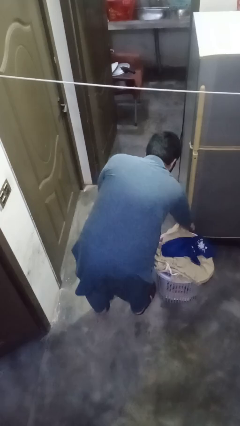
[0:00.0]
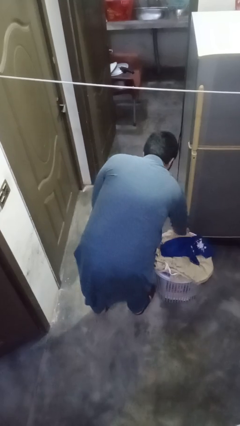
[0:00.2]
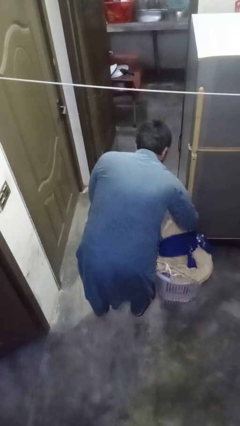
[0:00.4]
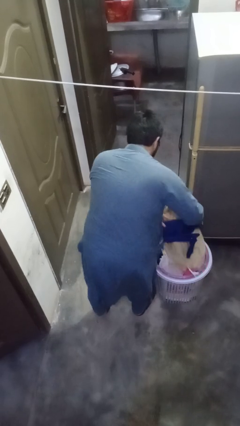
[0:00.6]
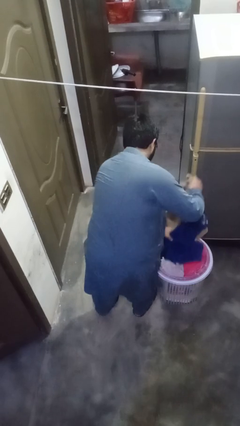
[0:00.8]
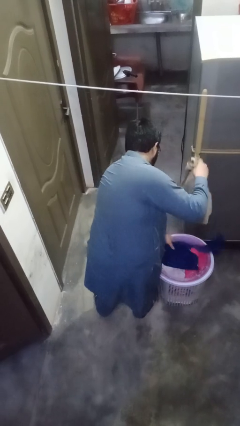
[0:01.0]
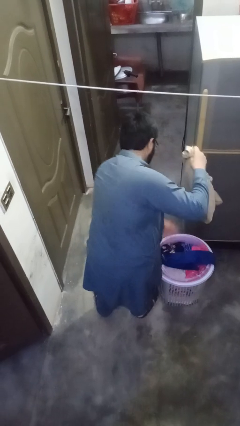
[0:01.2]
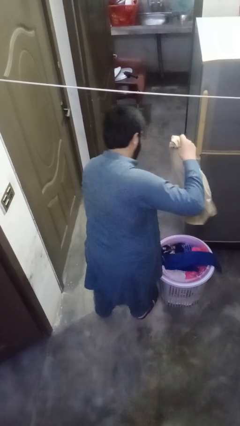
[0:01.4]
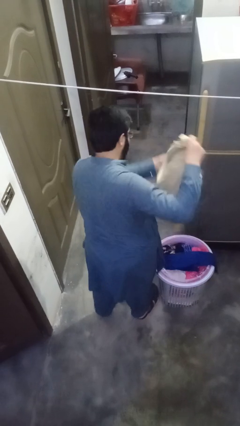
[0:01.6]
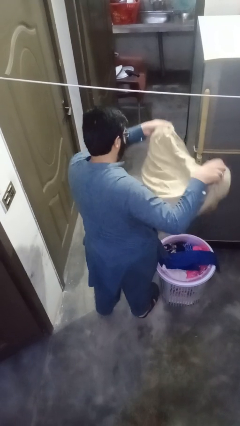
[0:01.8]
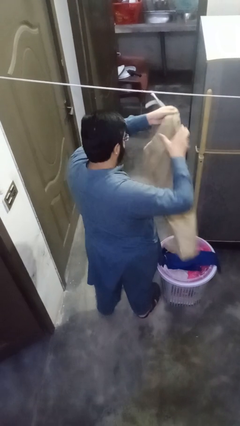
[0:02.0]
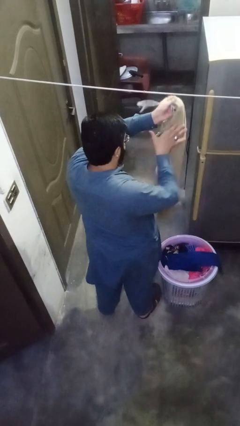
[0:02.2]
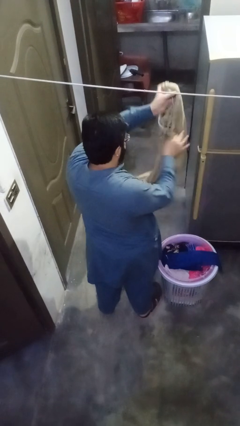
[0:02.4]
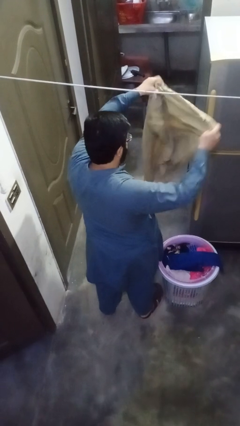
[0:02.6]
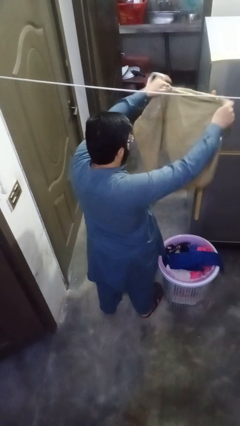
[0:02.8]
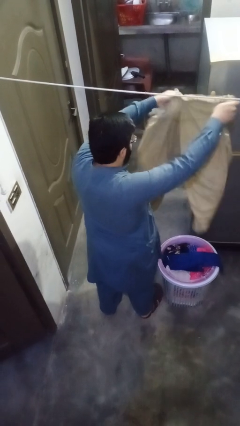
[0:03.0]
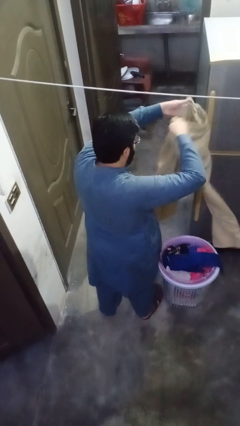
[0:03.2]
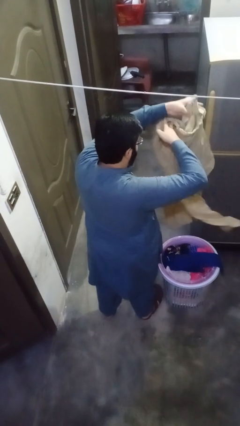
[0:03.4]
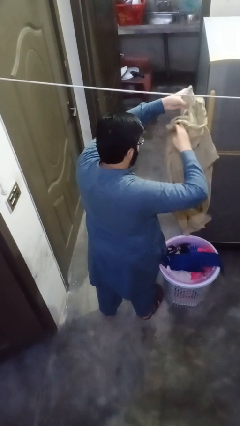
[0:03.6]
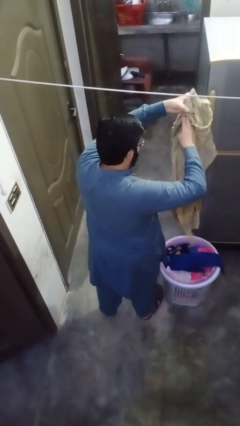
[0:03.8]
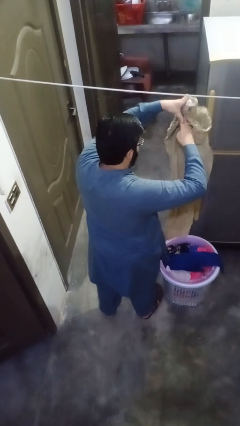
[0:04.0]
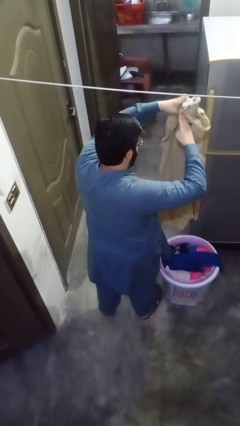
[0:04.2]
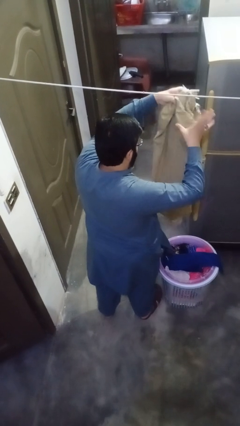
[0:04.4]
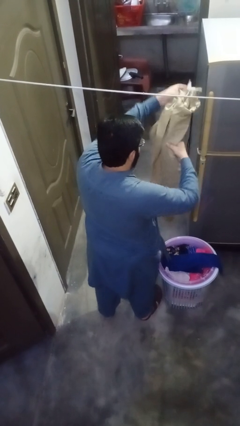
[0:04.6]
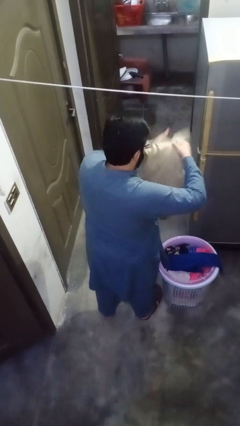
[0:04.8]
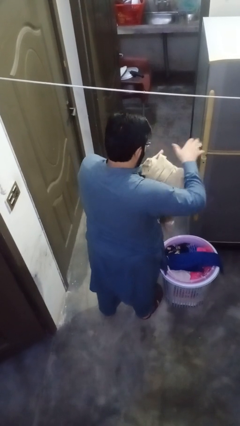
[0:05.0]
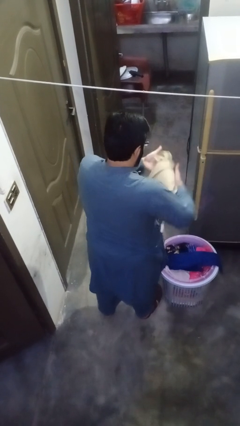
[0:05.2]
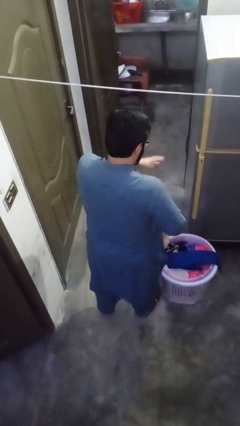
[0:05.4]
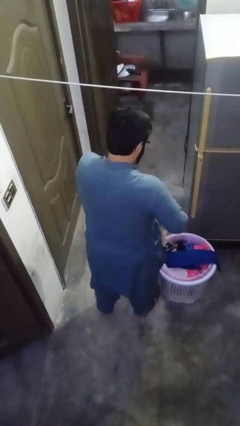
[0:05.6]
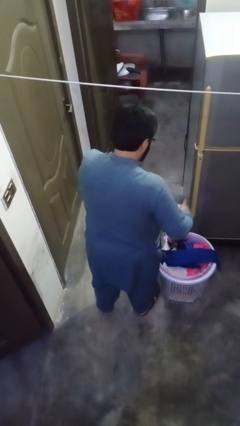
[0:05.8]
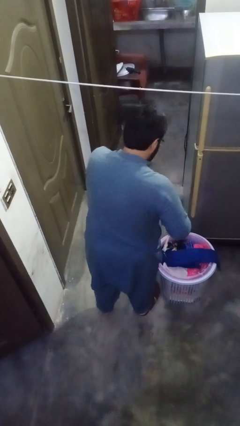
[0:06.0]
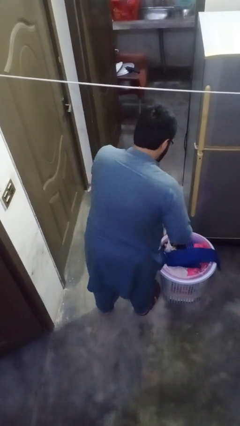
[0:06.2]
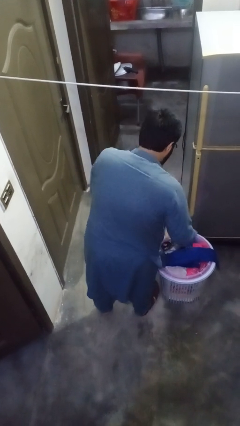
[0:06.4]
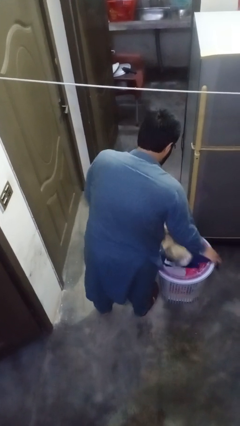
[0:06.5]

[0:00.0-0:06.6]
person folds pants

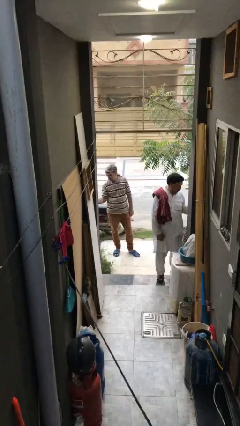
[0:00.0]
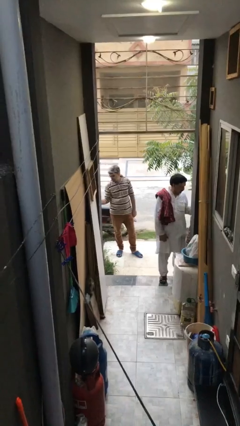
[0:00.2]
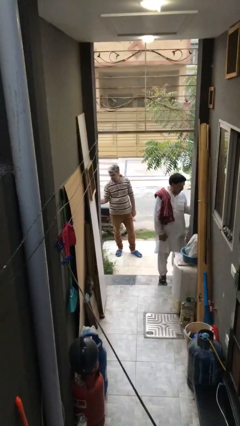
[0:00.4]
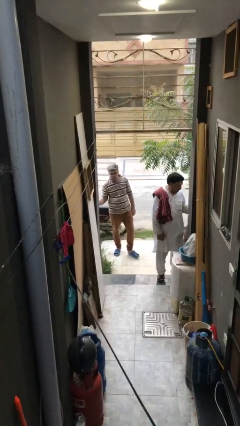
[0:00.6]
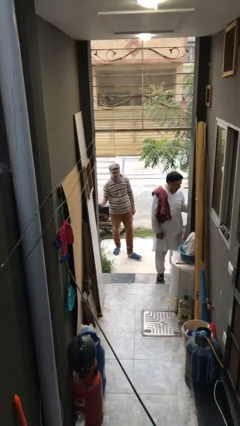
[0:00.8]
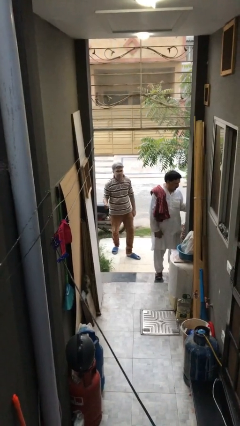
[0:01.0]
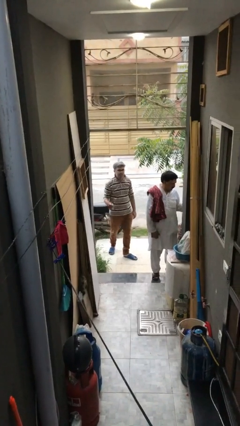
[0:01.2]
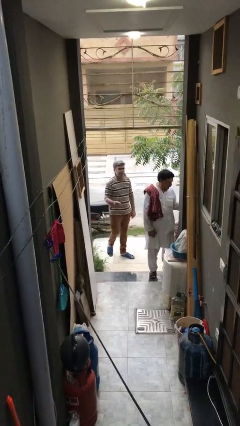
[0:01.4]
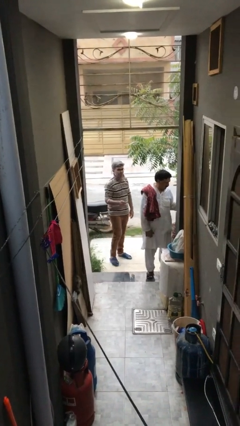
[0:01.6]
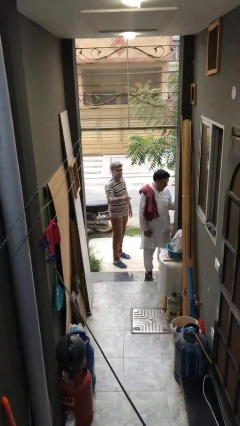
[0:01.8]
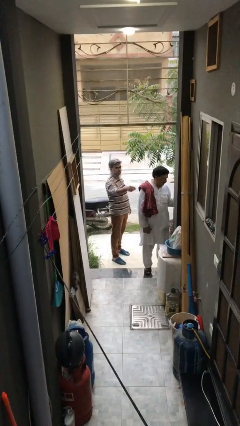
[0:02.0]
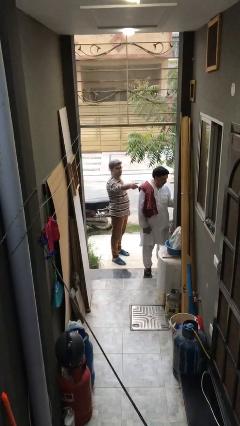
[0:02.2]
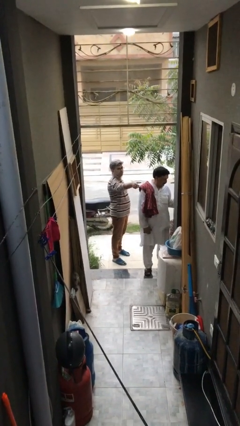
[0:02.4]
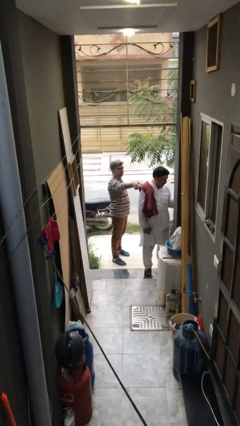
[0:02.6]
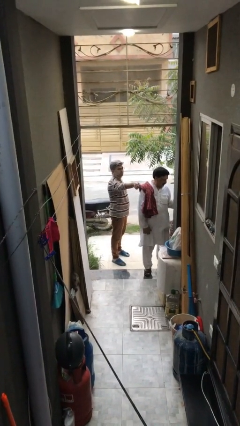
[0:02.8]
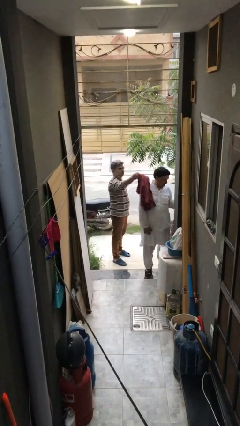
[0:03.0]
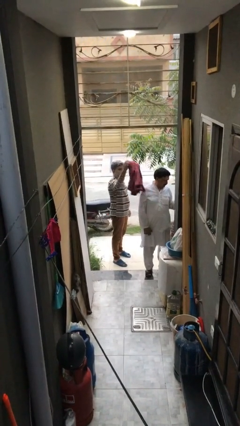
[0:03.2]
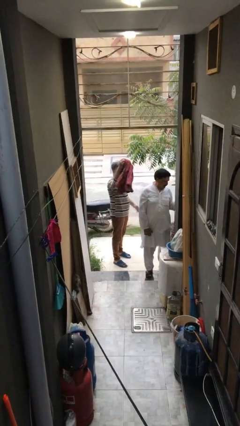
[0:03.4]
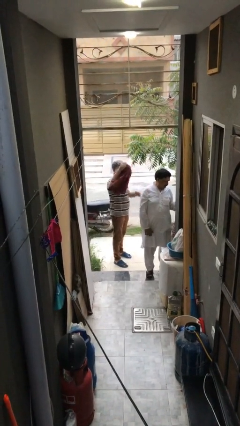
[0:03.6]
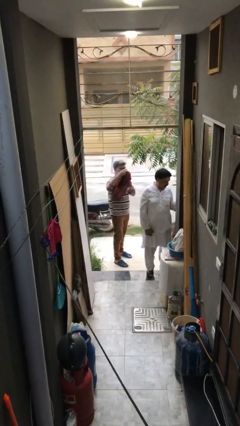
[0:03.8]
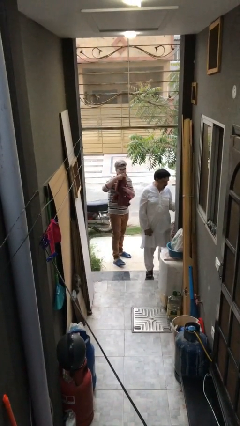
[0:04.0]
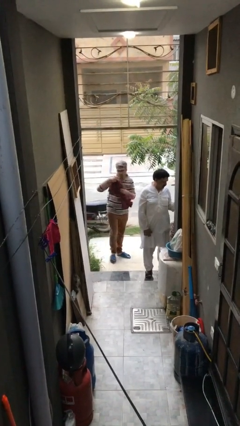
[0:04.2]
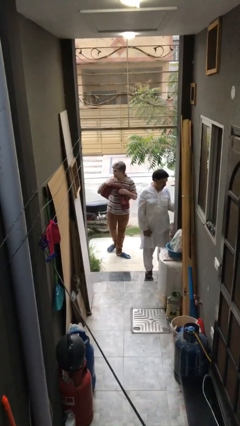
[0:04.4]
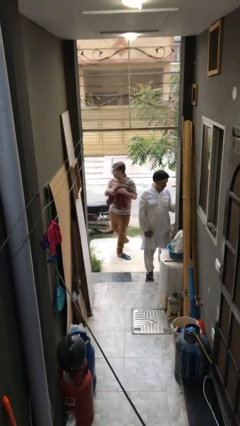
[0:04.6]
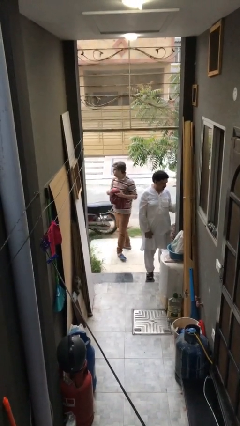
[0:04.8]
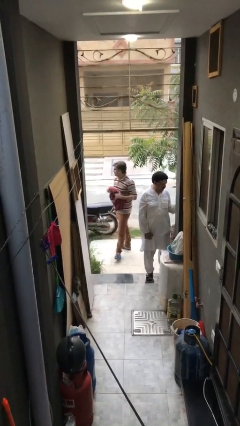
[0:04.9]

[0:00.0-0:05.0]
person steals object from person

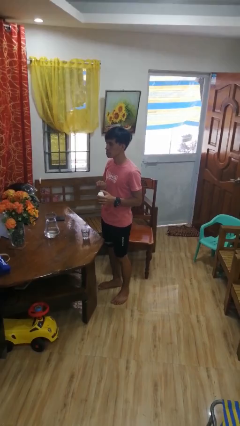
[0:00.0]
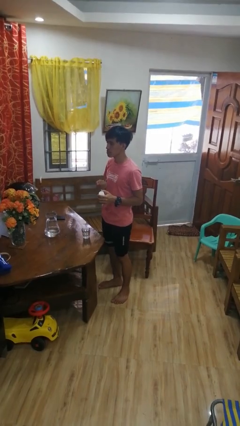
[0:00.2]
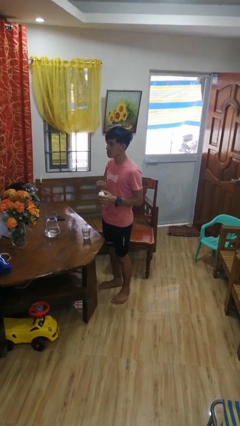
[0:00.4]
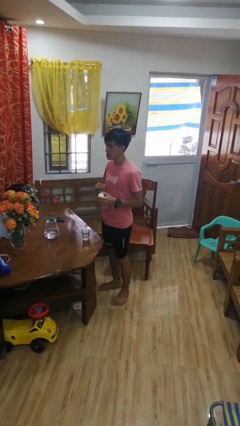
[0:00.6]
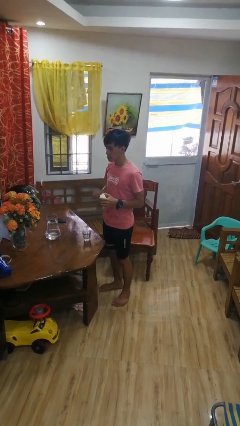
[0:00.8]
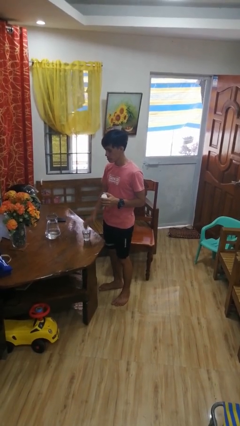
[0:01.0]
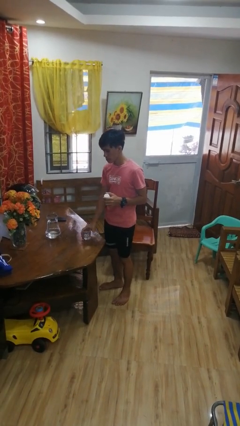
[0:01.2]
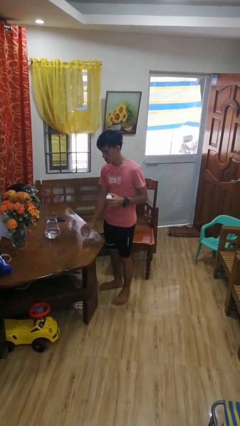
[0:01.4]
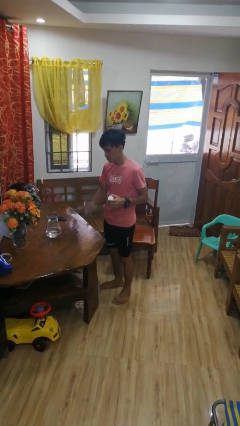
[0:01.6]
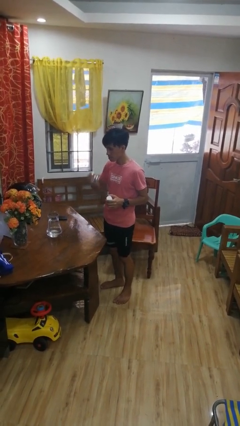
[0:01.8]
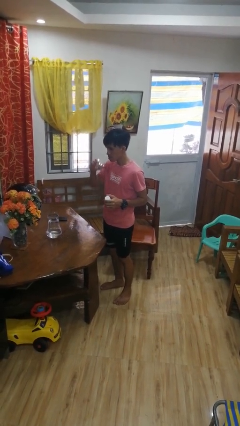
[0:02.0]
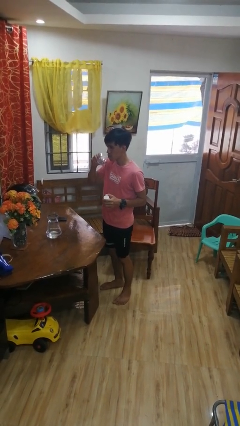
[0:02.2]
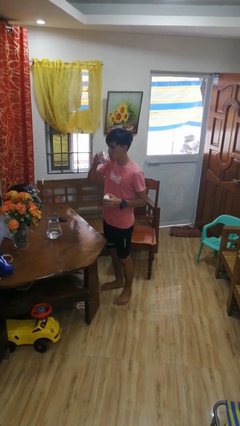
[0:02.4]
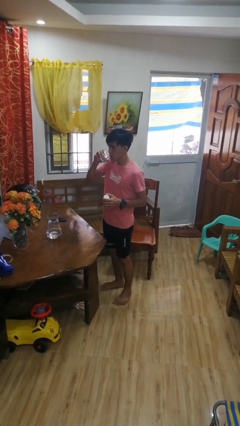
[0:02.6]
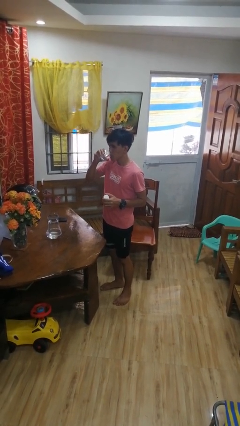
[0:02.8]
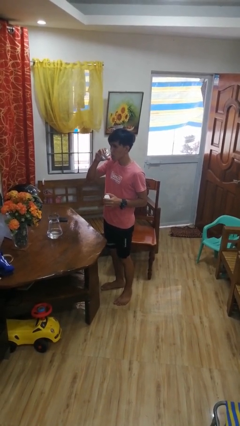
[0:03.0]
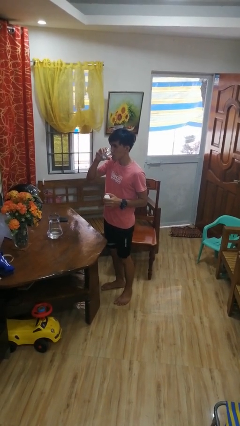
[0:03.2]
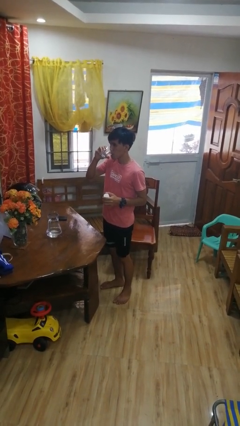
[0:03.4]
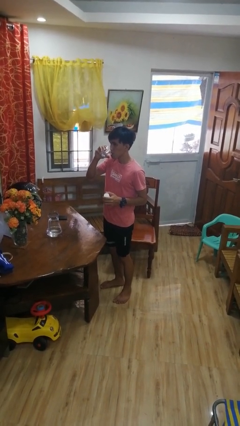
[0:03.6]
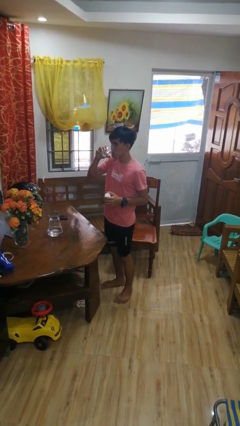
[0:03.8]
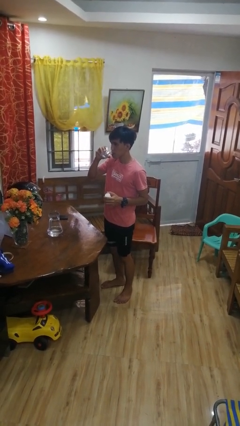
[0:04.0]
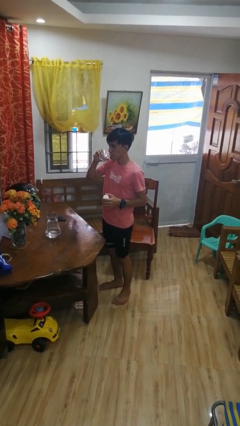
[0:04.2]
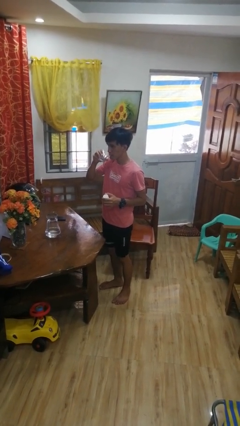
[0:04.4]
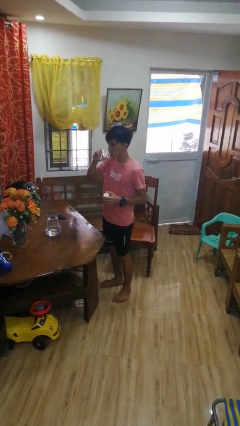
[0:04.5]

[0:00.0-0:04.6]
person drinks from cup

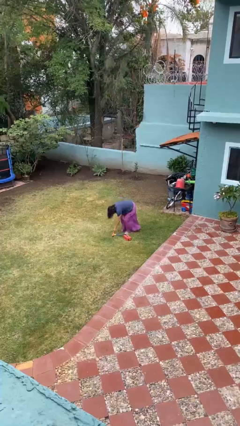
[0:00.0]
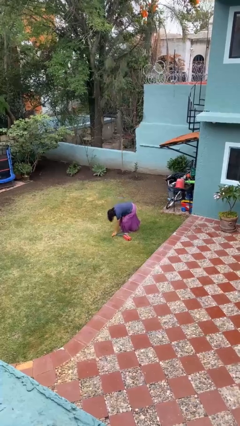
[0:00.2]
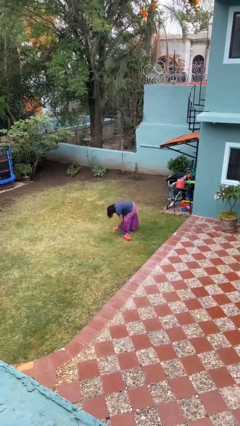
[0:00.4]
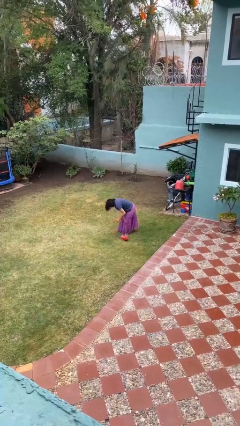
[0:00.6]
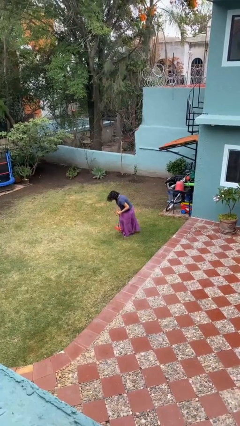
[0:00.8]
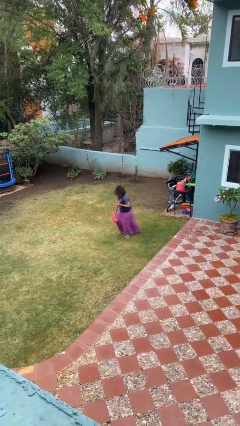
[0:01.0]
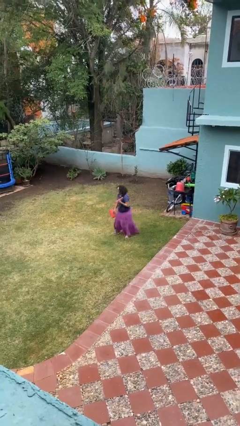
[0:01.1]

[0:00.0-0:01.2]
person picks up object from floor

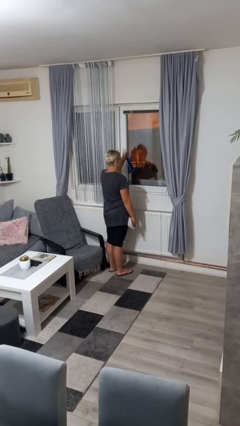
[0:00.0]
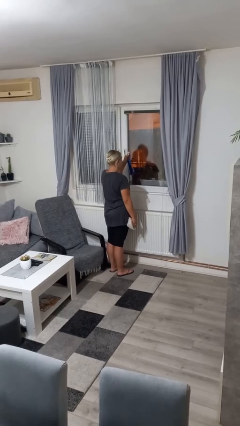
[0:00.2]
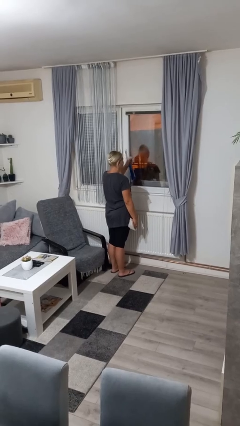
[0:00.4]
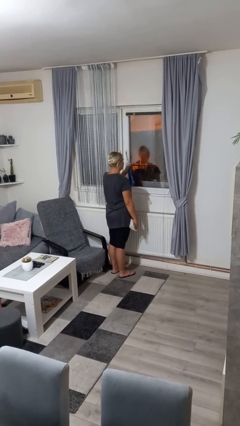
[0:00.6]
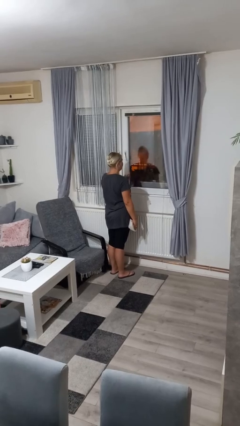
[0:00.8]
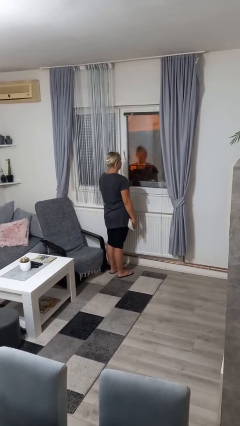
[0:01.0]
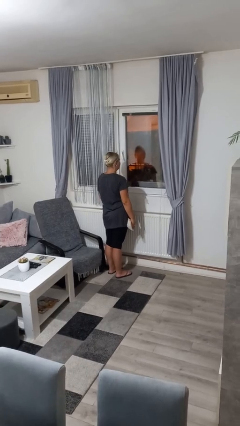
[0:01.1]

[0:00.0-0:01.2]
person sprays from bottle
